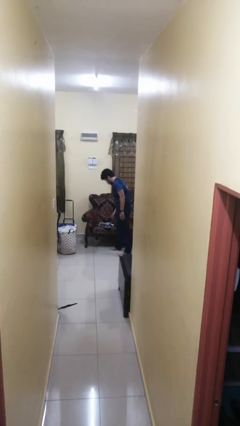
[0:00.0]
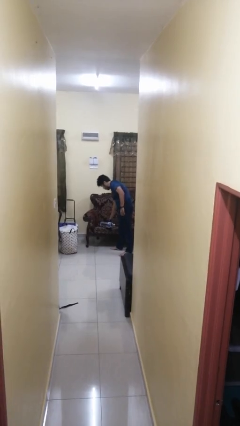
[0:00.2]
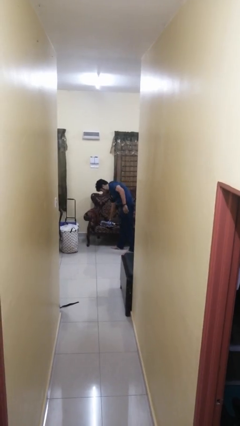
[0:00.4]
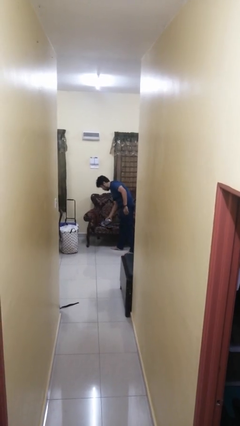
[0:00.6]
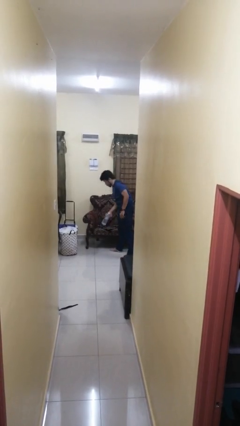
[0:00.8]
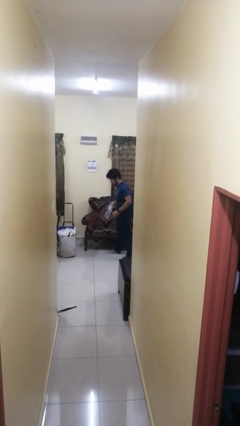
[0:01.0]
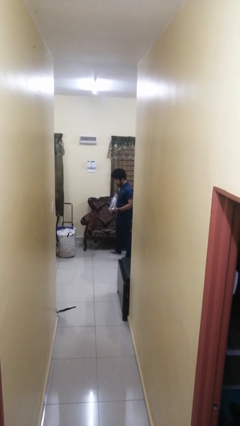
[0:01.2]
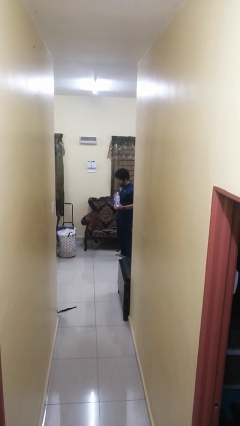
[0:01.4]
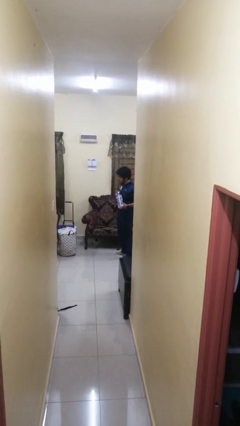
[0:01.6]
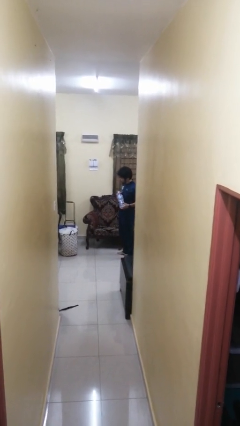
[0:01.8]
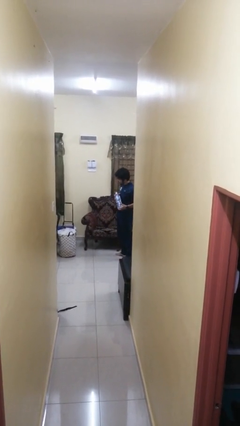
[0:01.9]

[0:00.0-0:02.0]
person picks up object from couch

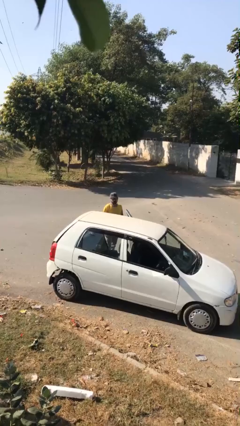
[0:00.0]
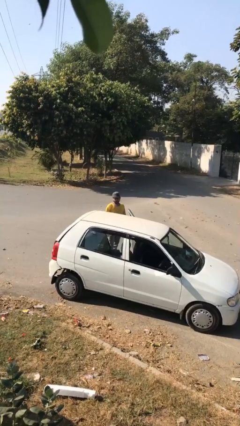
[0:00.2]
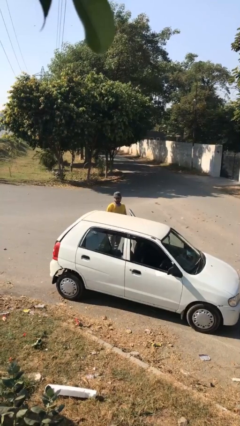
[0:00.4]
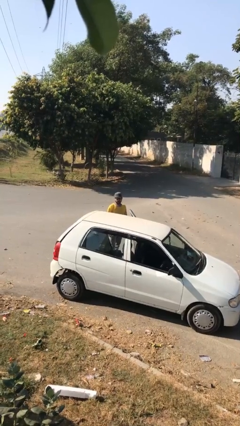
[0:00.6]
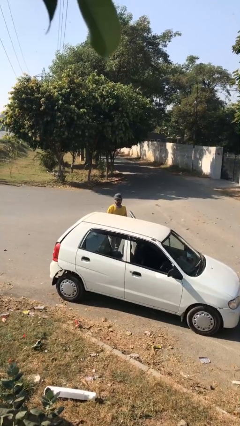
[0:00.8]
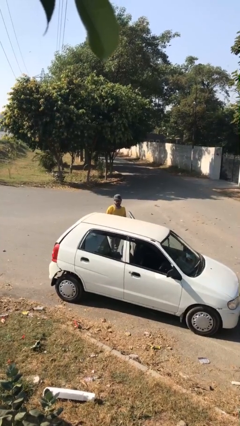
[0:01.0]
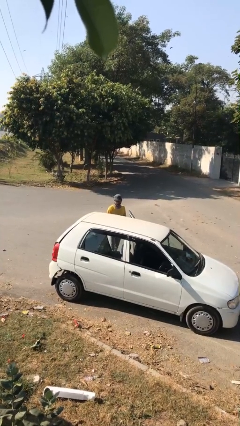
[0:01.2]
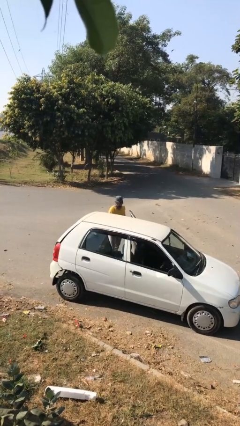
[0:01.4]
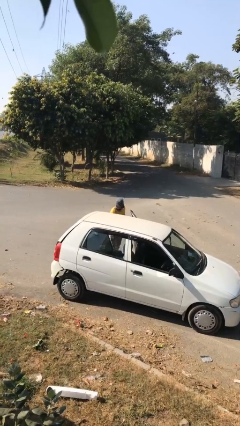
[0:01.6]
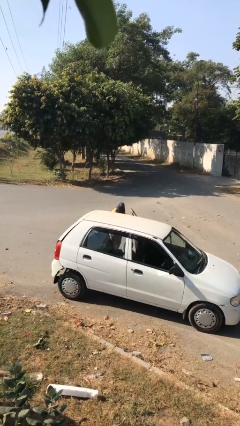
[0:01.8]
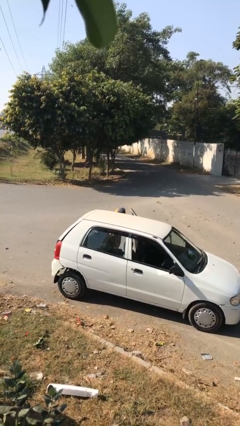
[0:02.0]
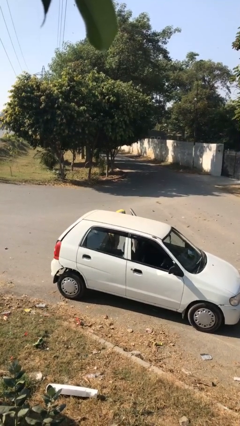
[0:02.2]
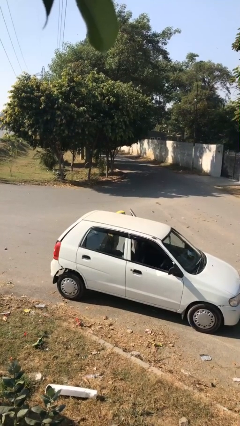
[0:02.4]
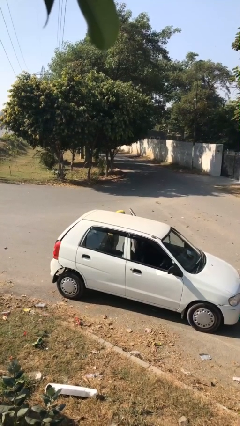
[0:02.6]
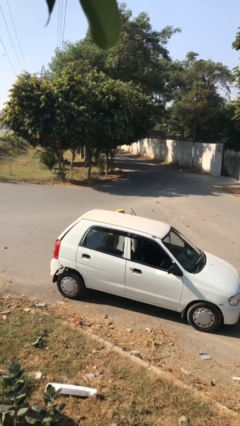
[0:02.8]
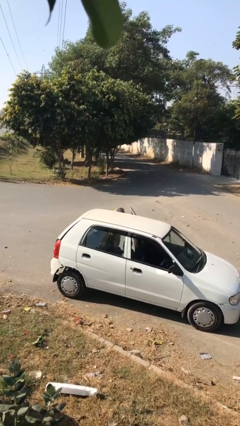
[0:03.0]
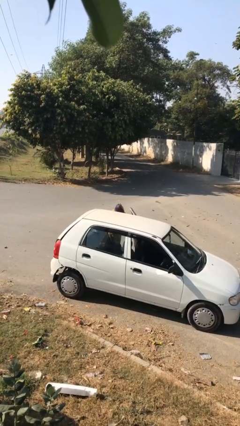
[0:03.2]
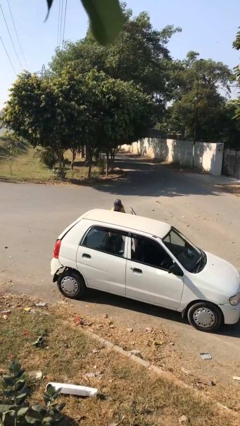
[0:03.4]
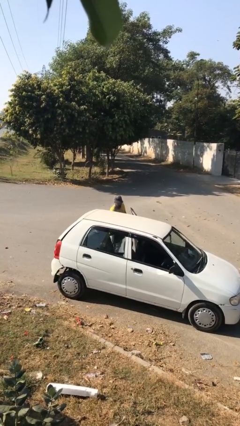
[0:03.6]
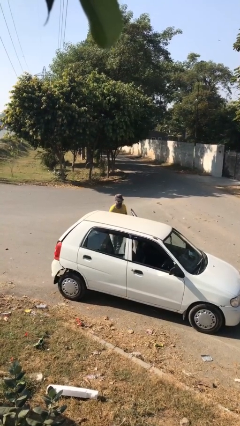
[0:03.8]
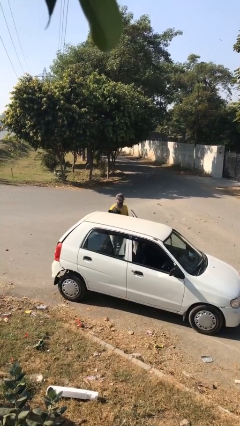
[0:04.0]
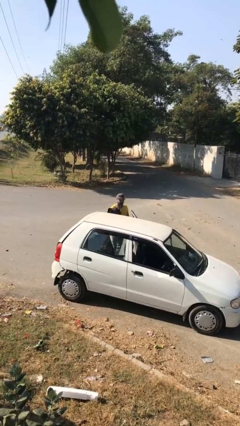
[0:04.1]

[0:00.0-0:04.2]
person unloads car

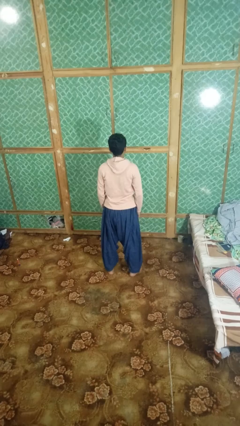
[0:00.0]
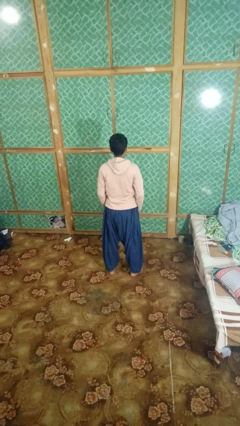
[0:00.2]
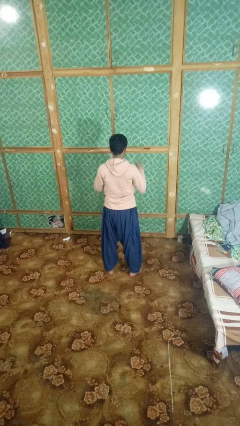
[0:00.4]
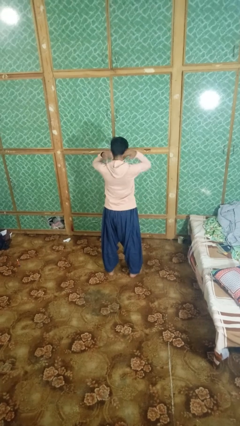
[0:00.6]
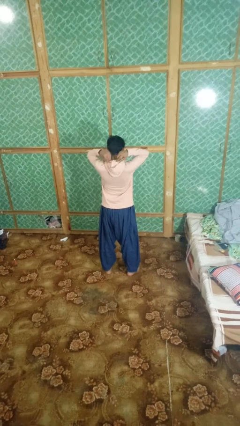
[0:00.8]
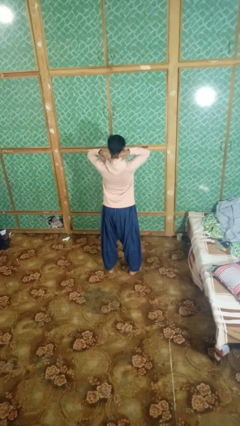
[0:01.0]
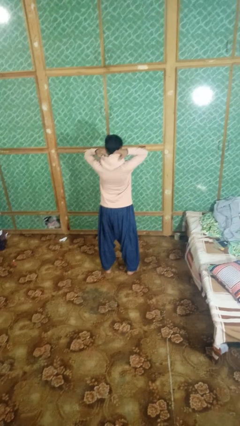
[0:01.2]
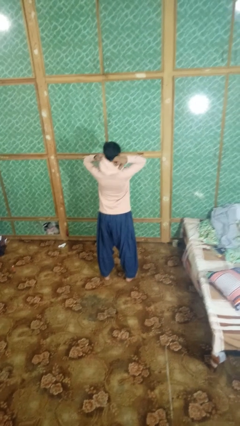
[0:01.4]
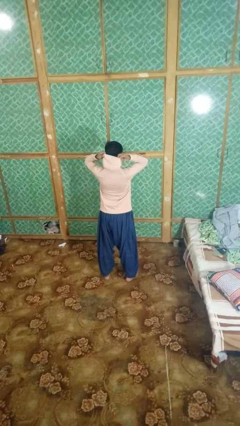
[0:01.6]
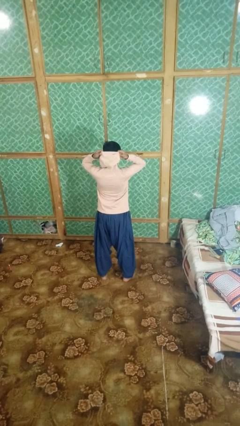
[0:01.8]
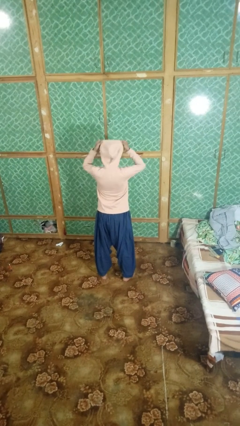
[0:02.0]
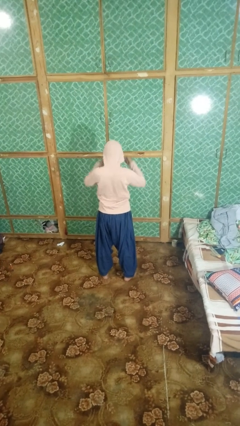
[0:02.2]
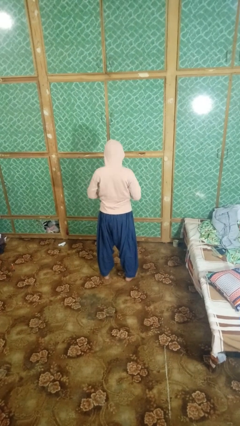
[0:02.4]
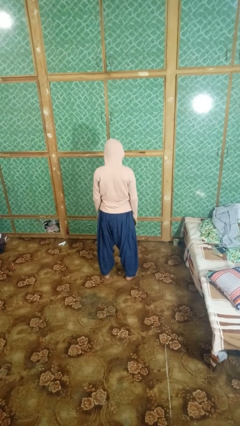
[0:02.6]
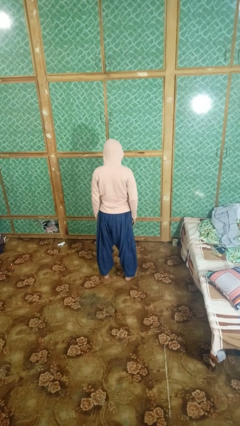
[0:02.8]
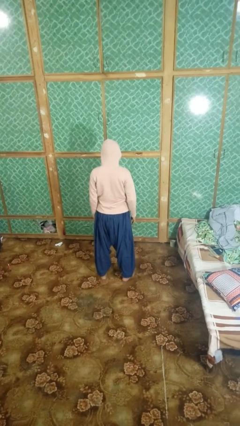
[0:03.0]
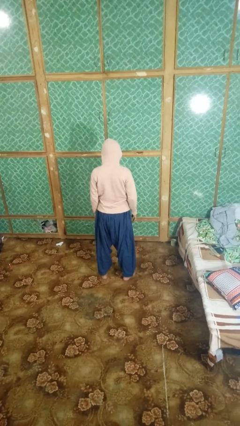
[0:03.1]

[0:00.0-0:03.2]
person puts on hoodie

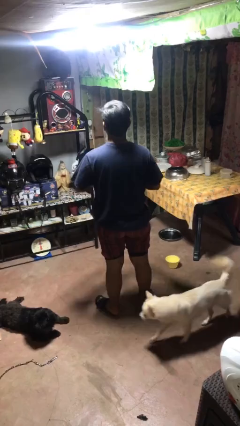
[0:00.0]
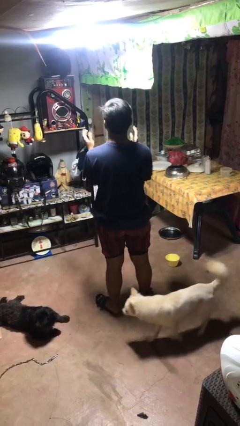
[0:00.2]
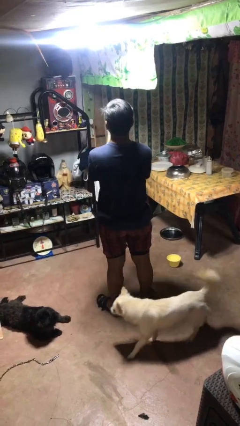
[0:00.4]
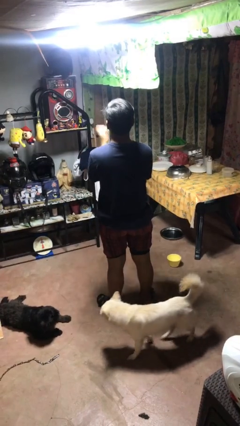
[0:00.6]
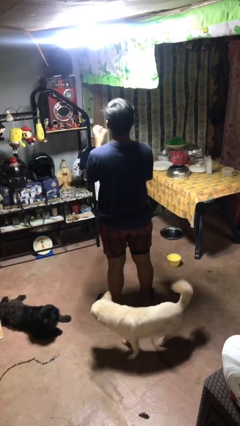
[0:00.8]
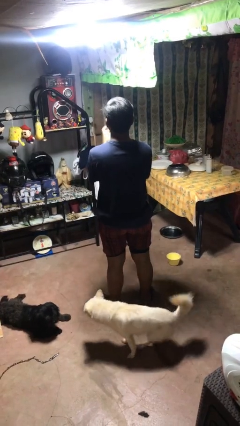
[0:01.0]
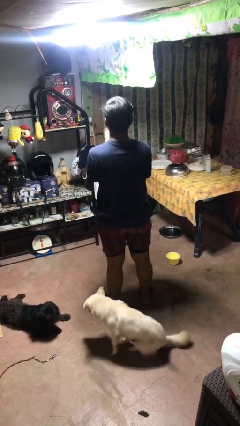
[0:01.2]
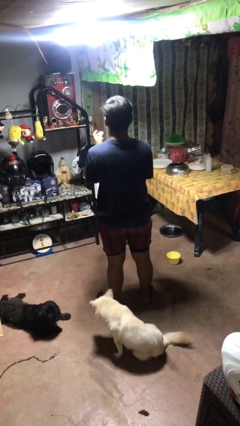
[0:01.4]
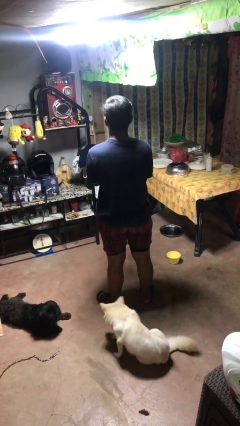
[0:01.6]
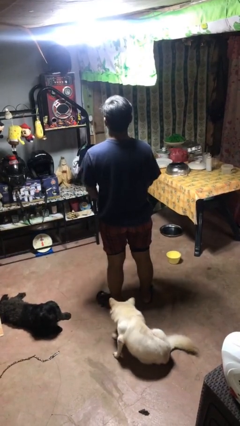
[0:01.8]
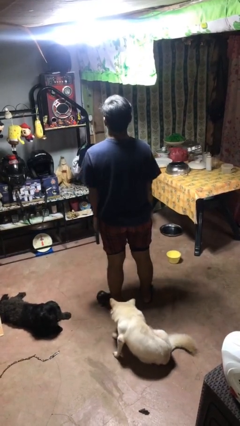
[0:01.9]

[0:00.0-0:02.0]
person claps hands

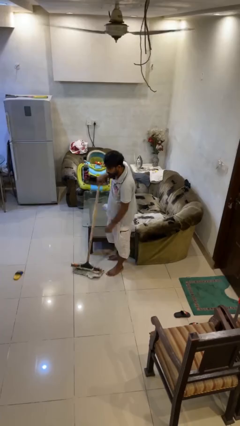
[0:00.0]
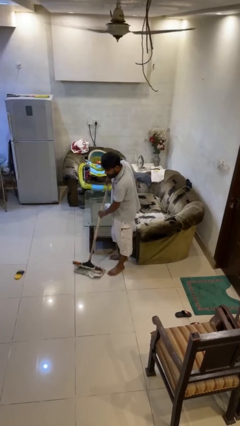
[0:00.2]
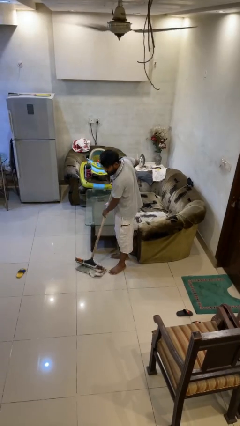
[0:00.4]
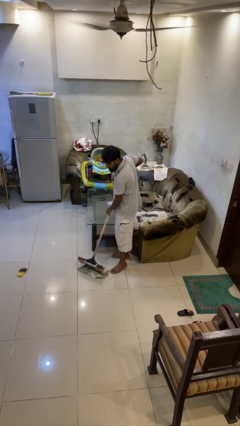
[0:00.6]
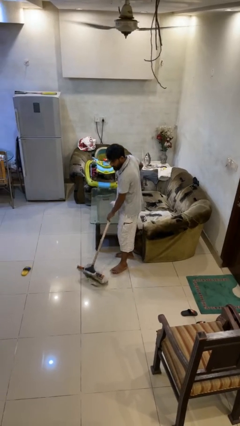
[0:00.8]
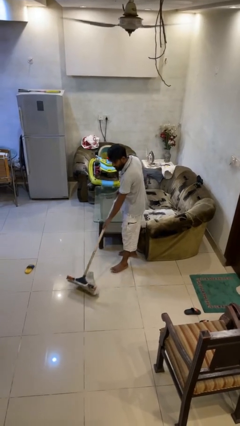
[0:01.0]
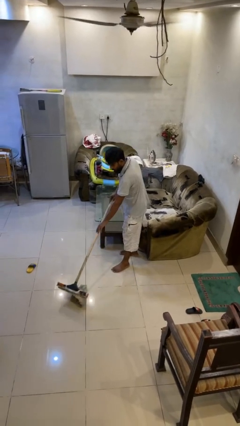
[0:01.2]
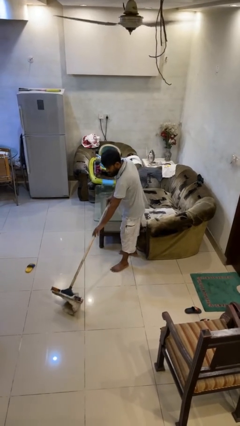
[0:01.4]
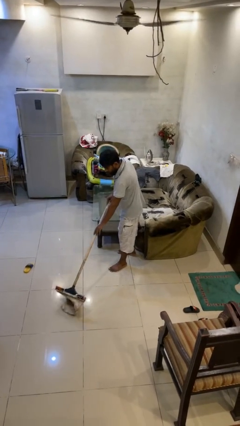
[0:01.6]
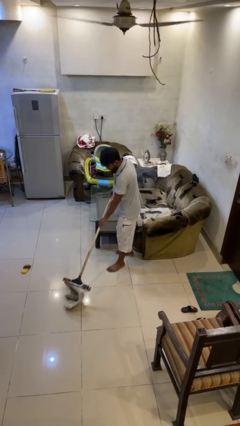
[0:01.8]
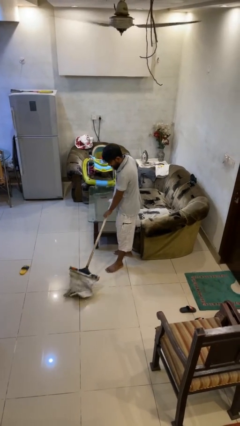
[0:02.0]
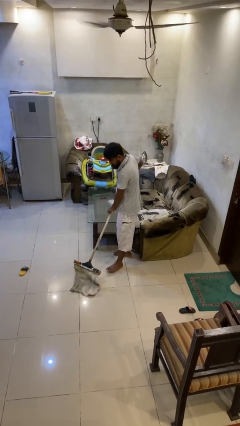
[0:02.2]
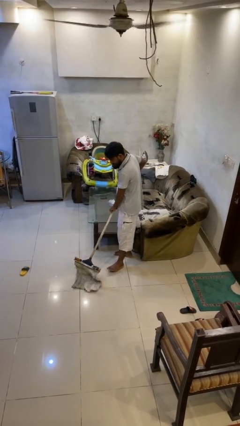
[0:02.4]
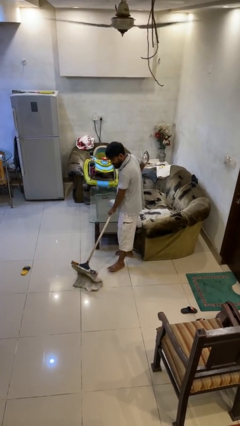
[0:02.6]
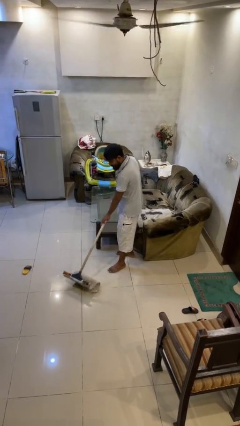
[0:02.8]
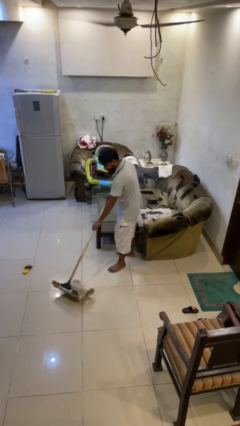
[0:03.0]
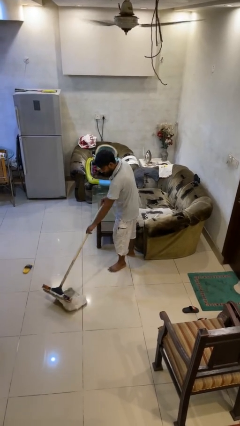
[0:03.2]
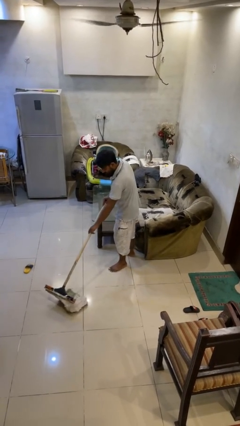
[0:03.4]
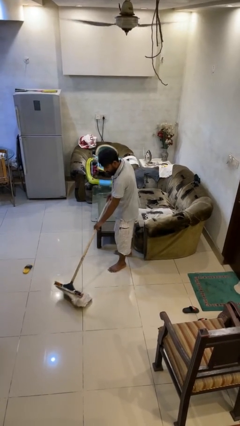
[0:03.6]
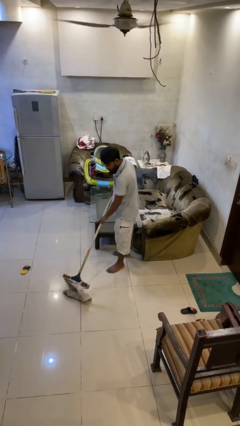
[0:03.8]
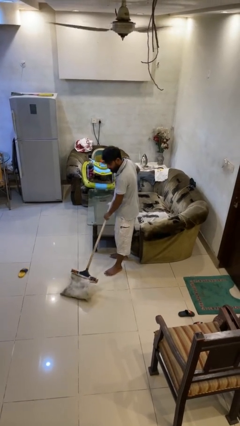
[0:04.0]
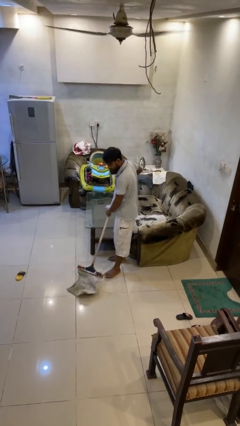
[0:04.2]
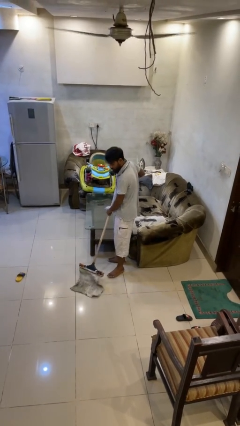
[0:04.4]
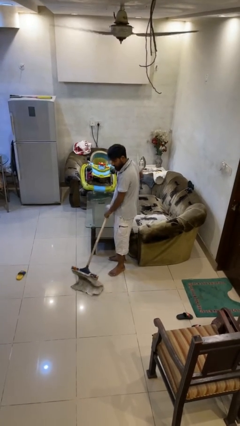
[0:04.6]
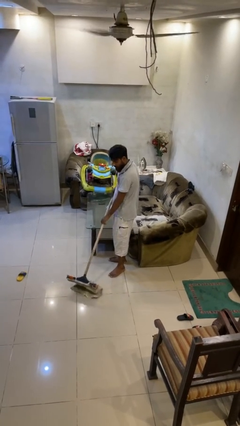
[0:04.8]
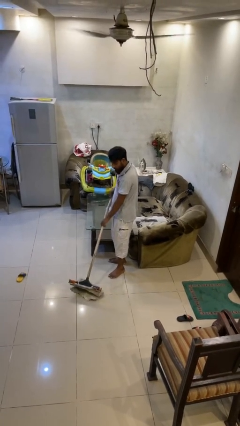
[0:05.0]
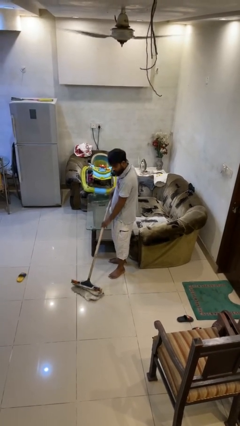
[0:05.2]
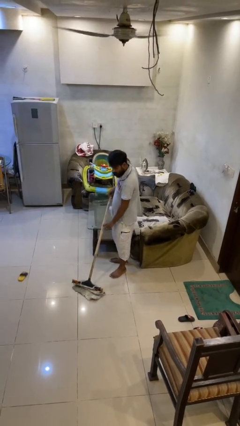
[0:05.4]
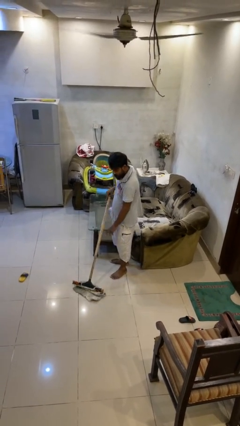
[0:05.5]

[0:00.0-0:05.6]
person mops

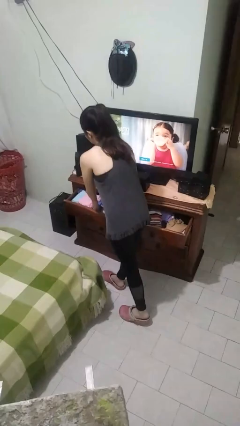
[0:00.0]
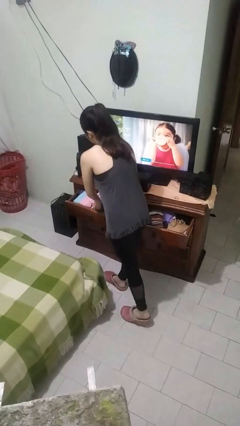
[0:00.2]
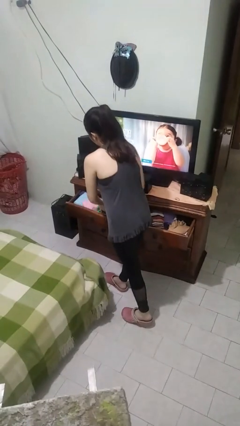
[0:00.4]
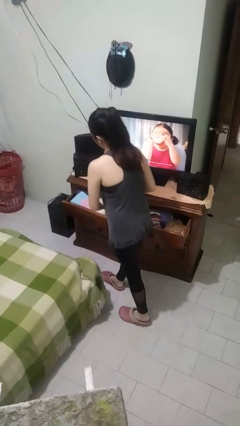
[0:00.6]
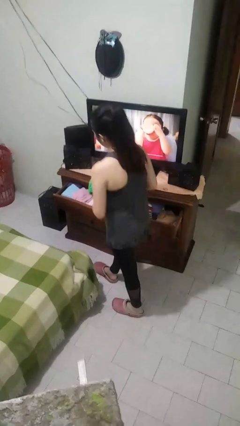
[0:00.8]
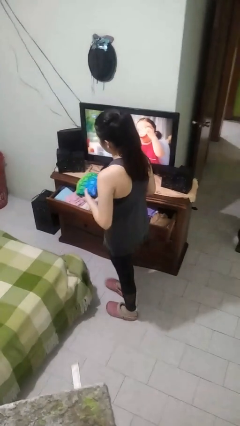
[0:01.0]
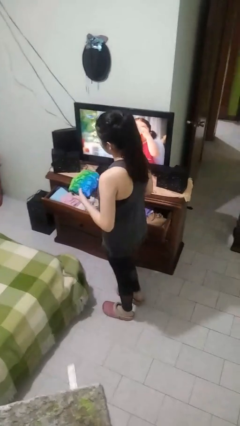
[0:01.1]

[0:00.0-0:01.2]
person takes clothes from dresser
